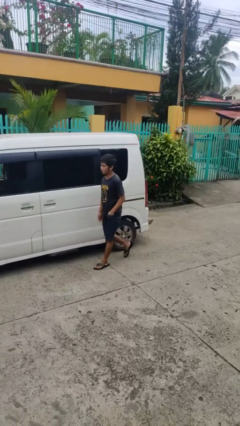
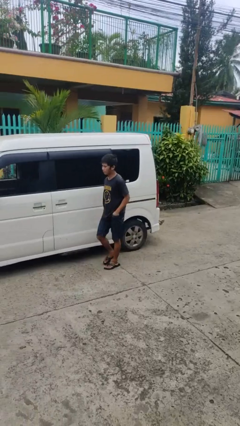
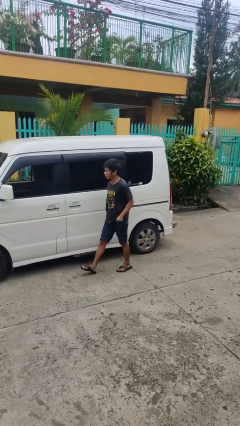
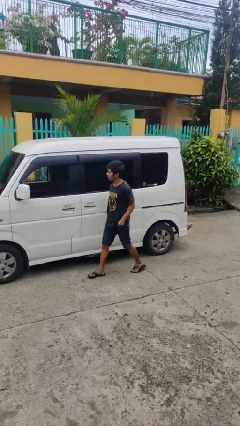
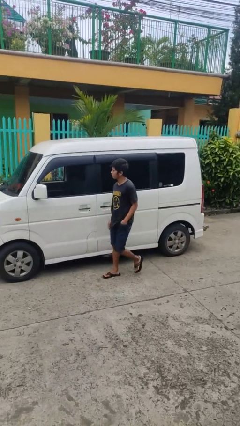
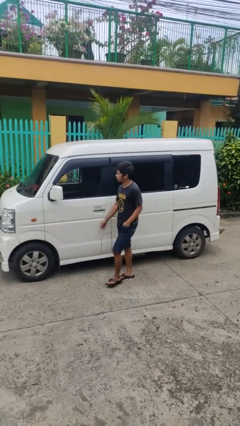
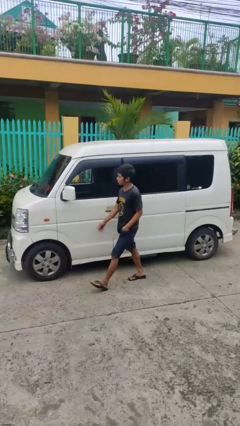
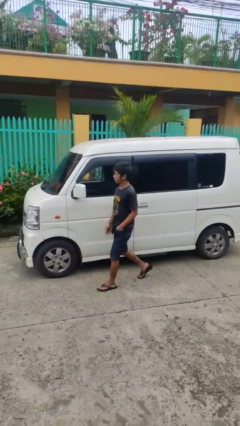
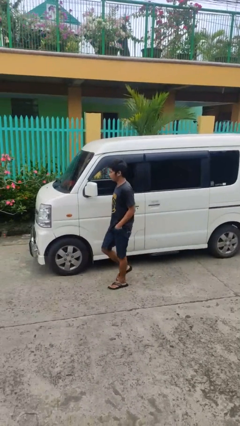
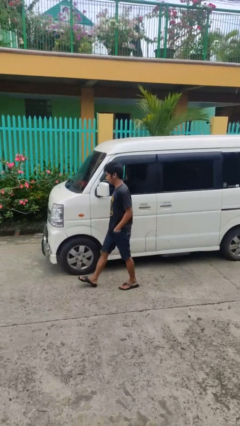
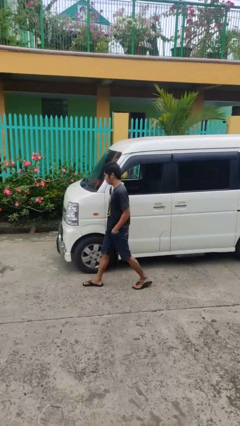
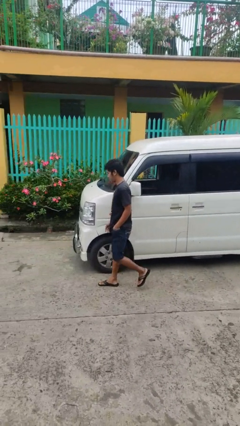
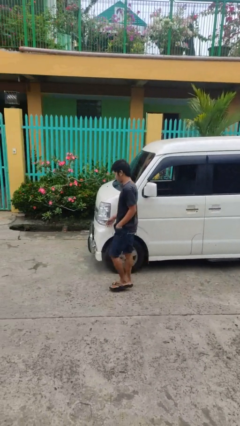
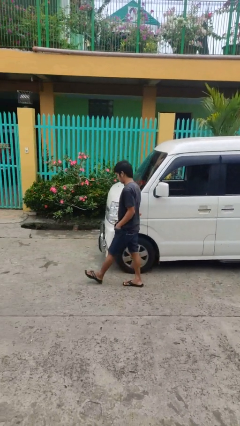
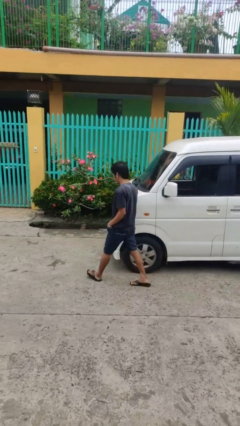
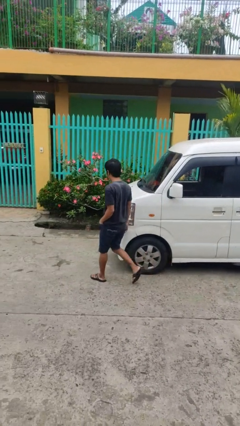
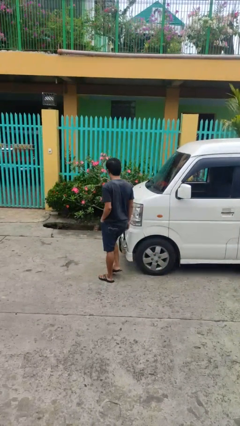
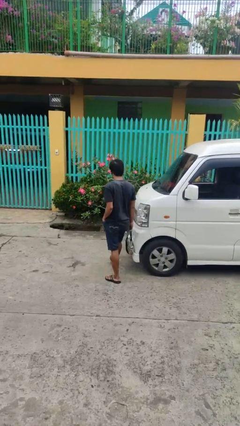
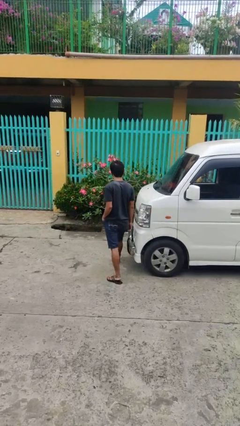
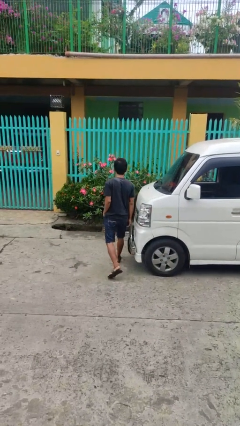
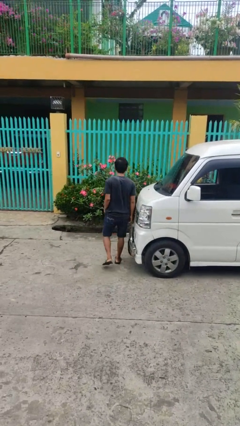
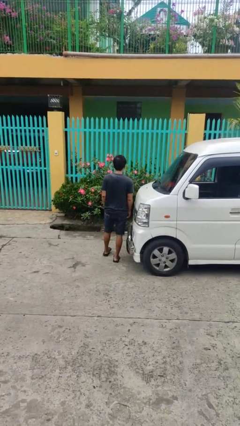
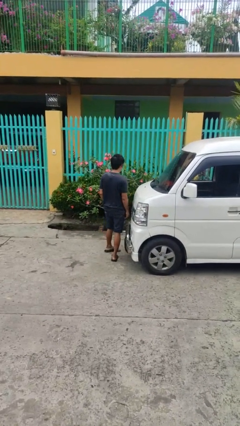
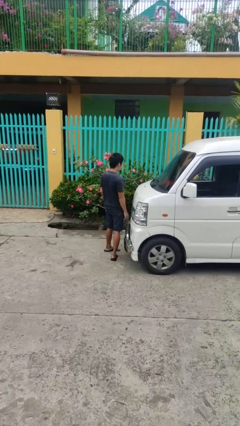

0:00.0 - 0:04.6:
person walks around car

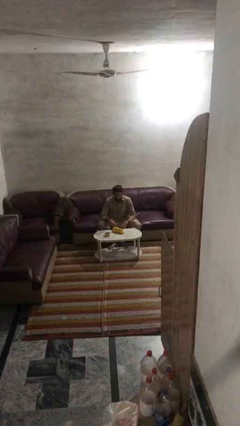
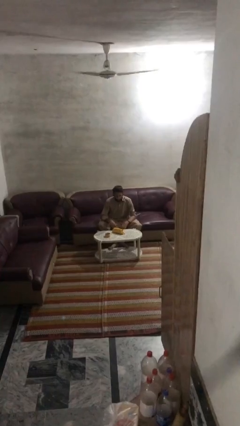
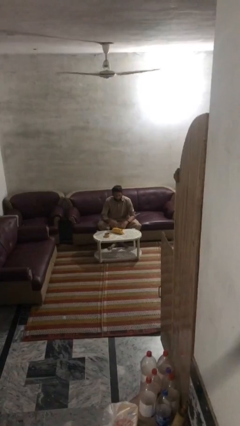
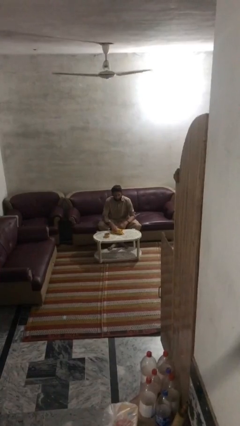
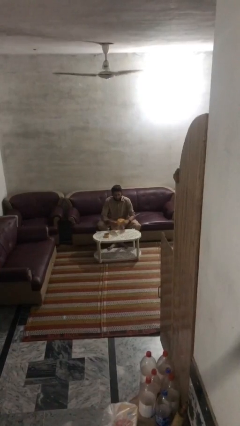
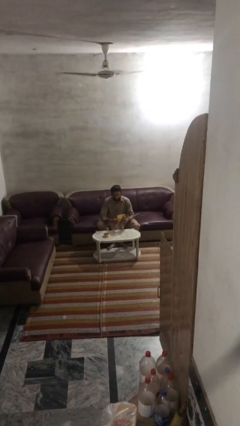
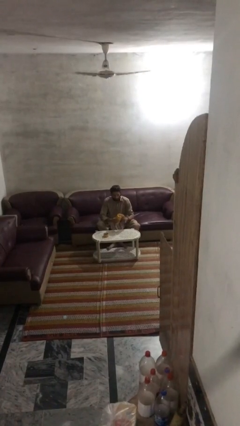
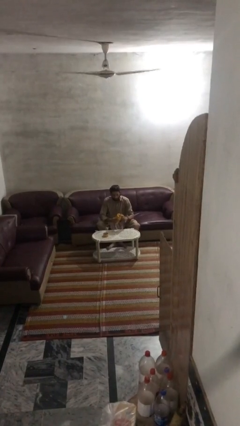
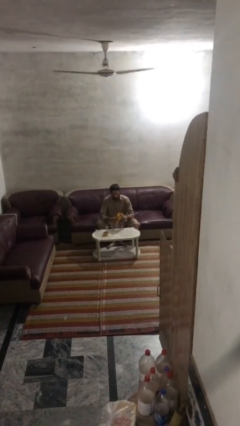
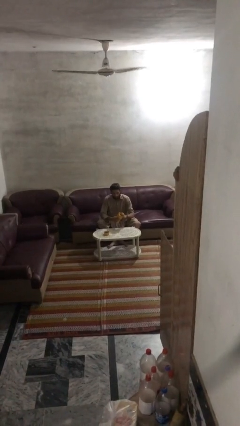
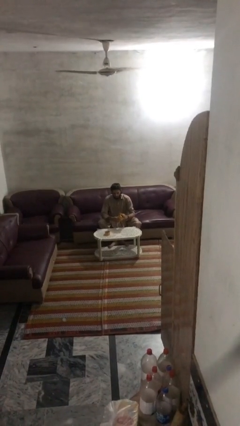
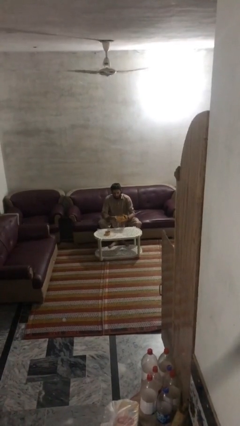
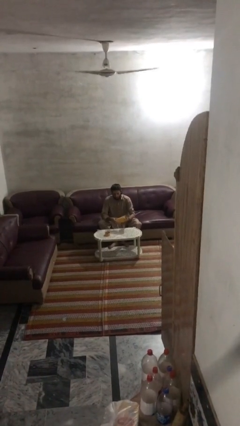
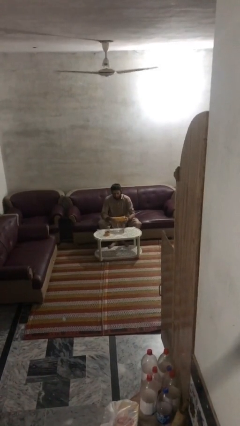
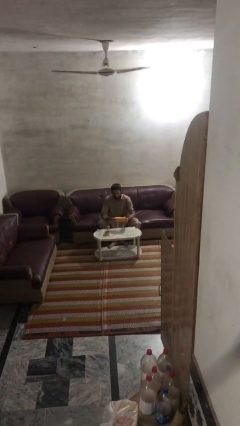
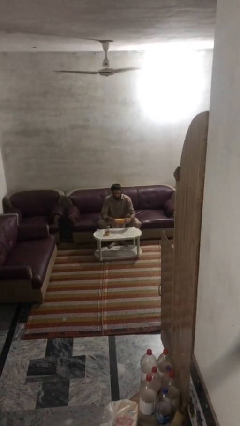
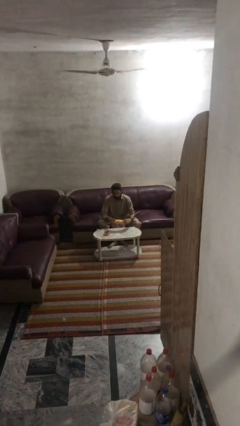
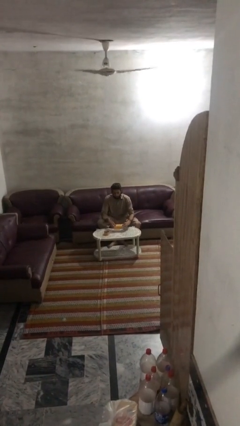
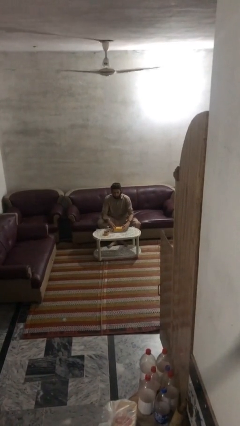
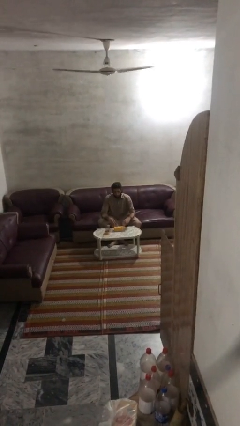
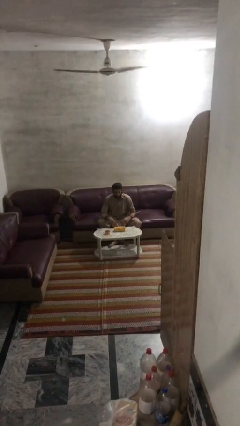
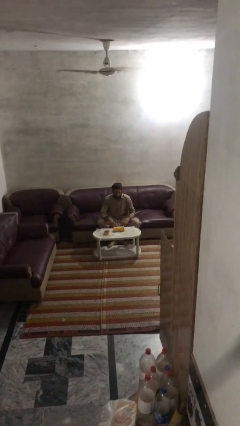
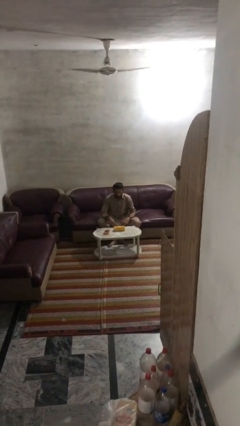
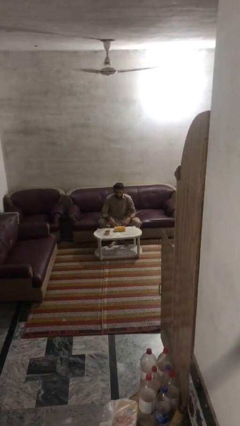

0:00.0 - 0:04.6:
person wraps box

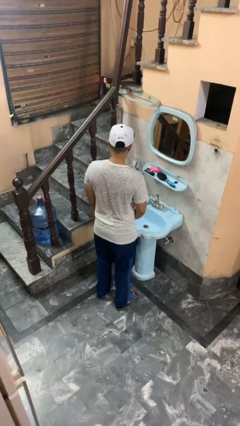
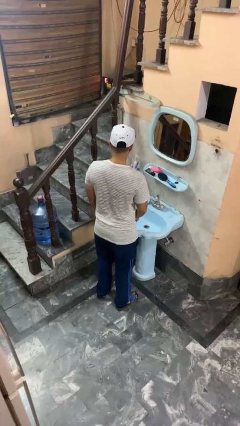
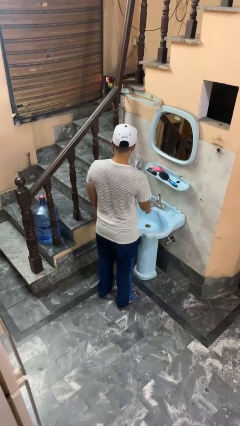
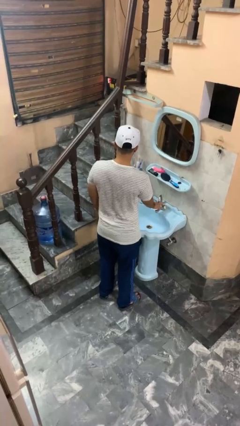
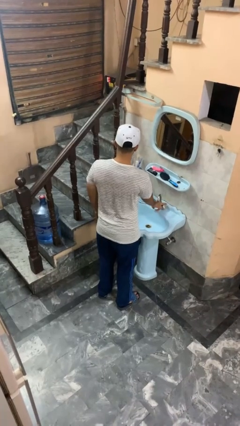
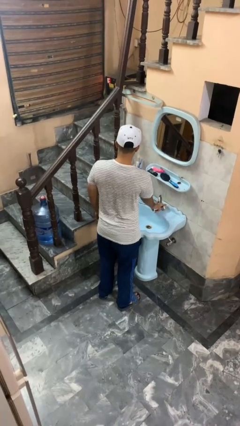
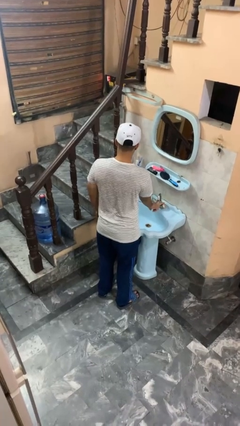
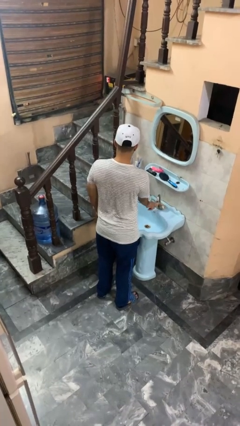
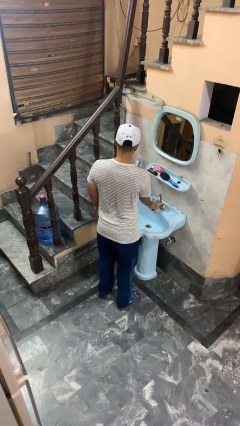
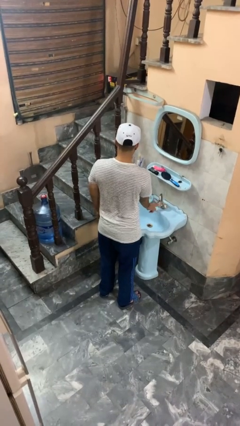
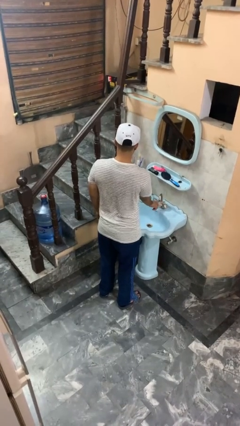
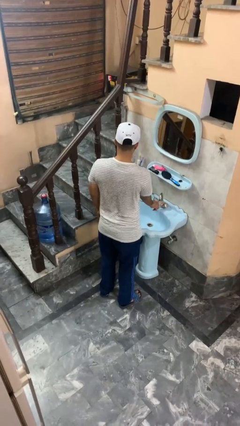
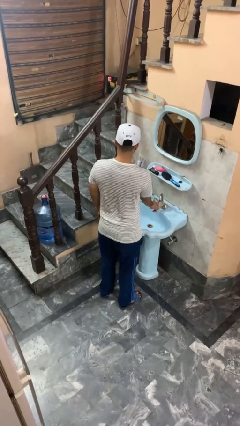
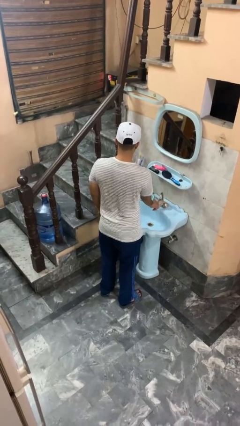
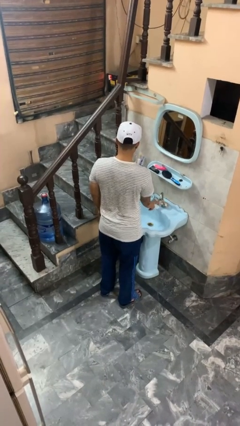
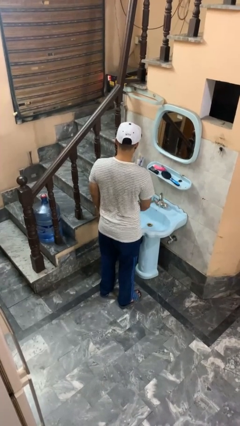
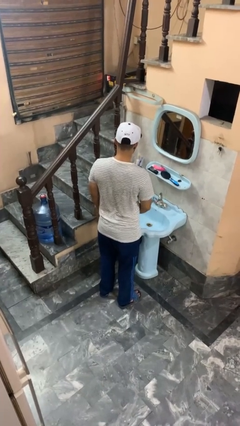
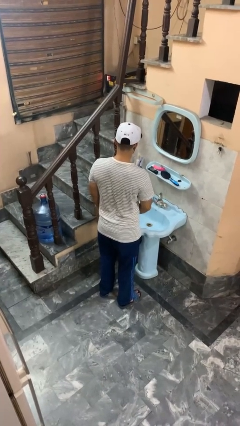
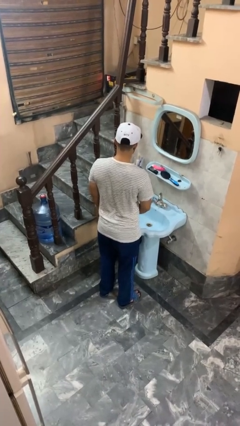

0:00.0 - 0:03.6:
person turns on faucet

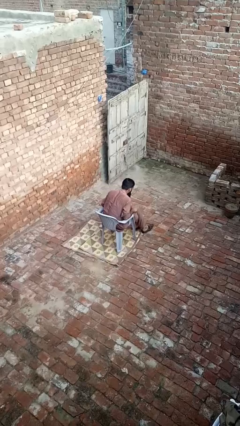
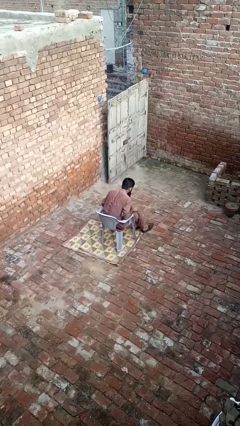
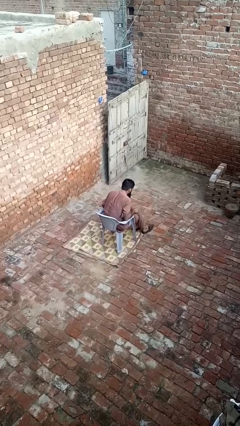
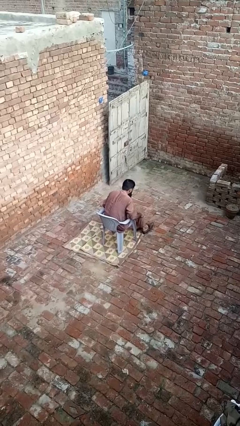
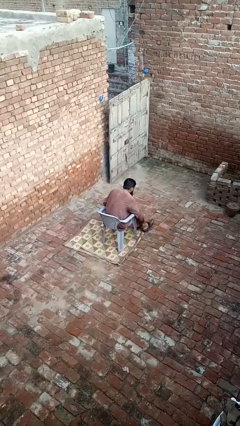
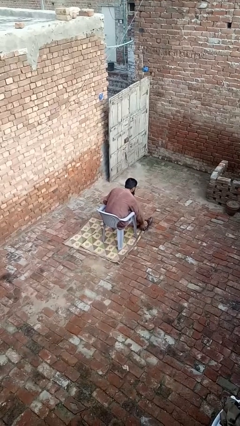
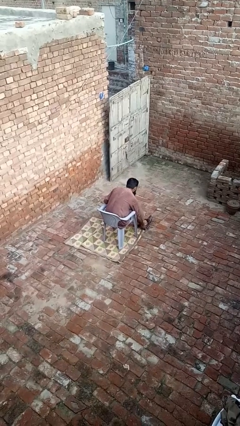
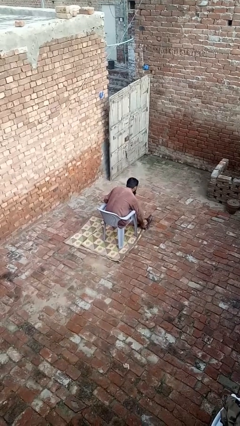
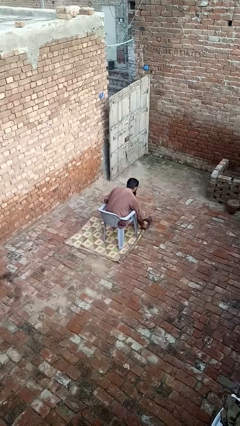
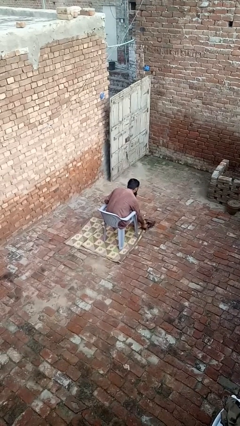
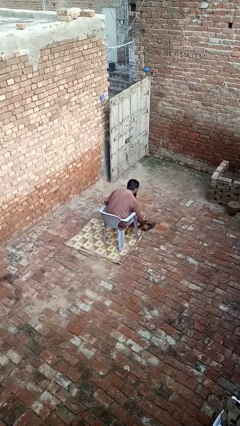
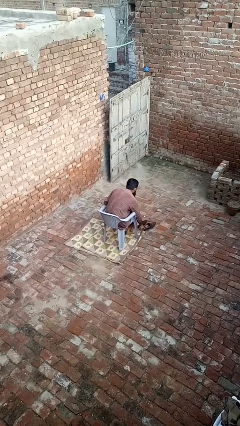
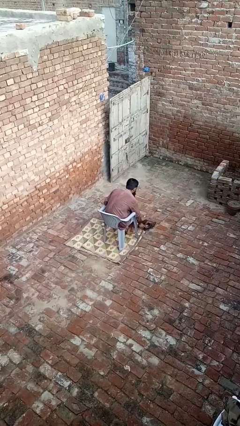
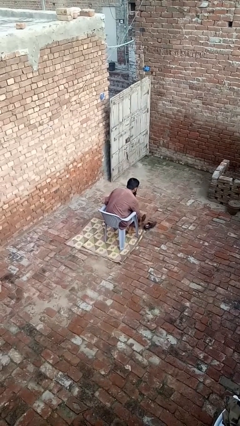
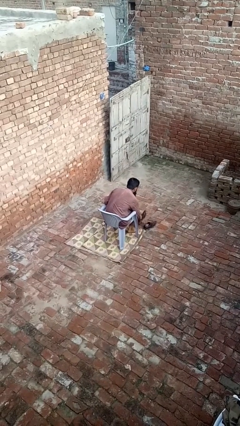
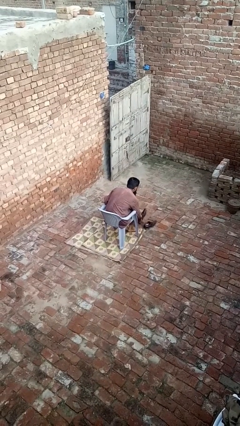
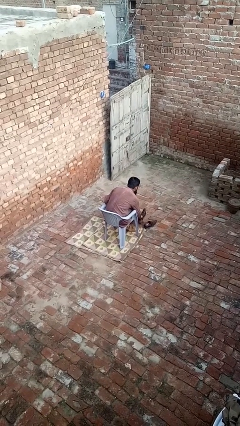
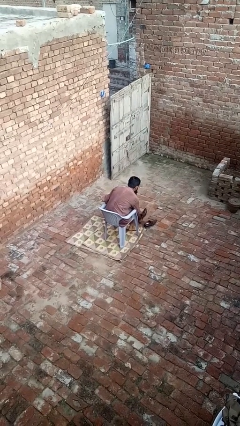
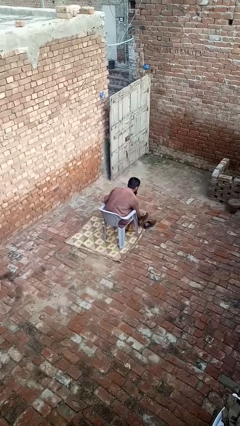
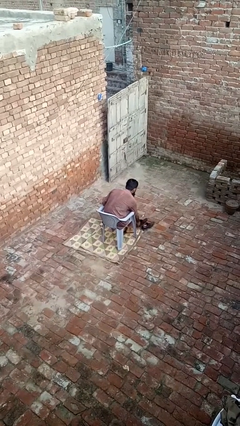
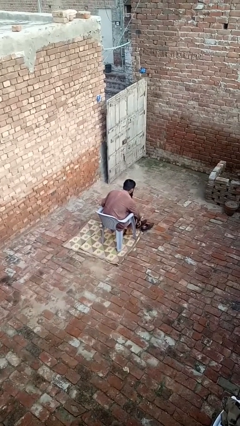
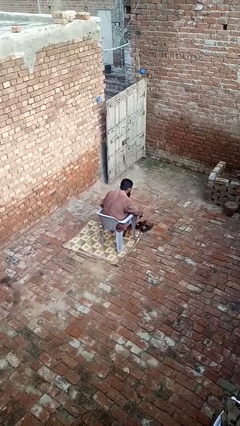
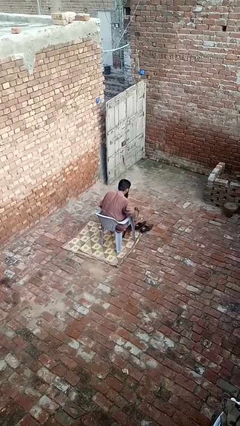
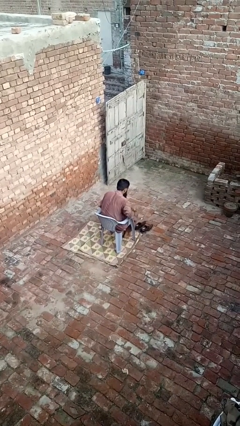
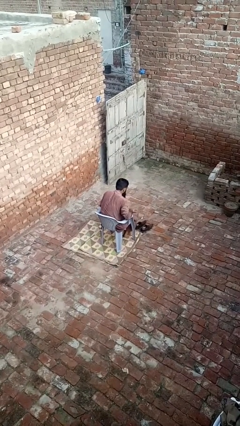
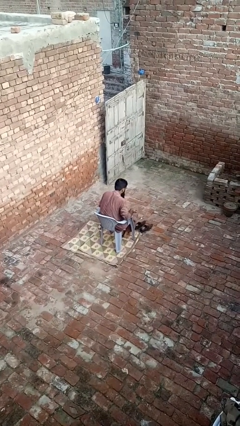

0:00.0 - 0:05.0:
person takes off shoes
